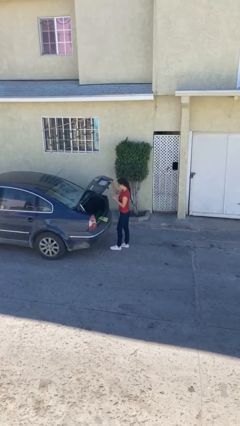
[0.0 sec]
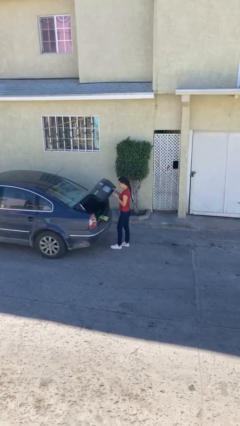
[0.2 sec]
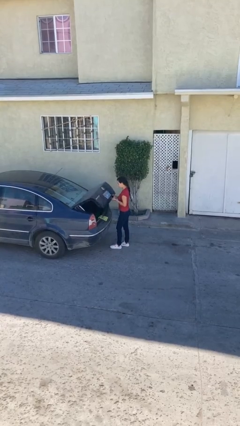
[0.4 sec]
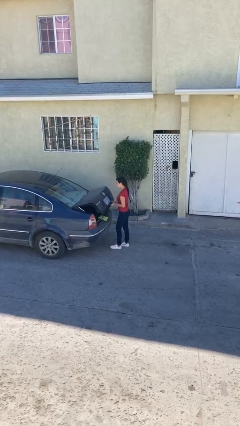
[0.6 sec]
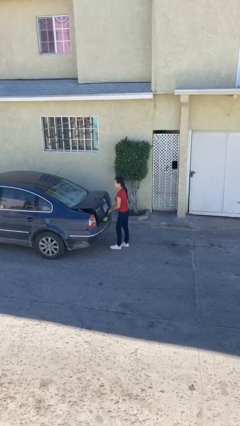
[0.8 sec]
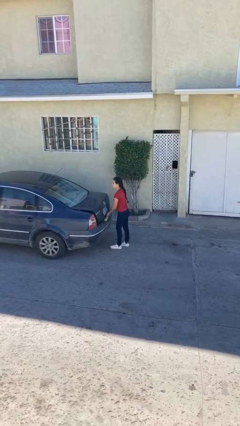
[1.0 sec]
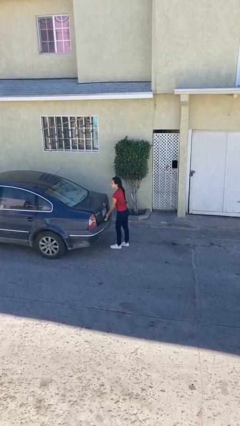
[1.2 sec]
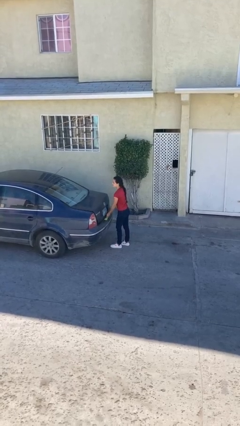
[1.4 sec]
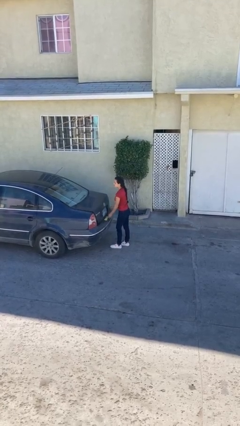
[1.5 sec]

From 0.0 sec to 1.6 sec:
person closes car trunk

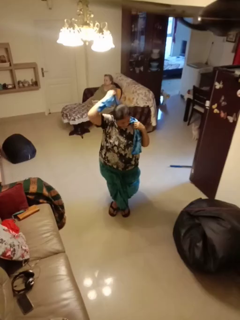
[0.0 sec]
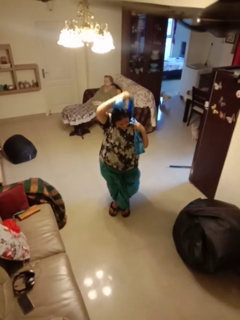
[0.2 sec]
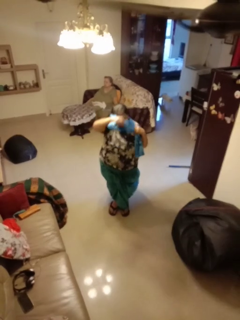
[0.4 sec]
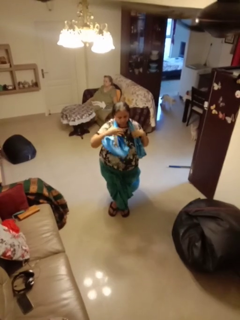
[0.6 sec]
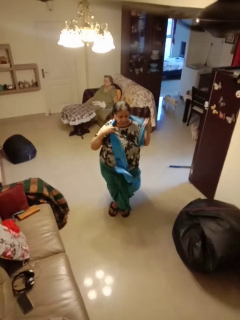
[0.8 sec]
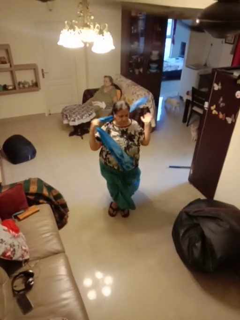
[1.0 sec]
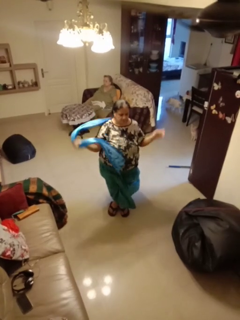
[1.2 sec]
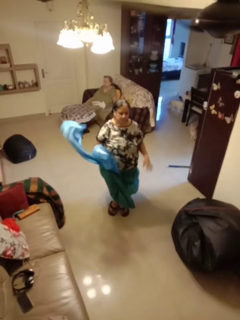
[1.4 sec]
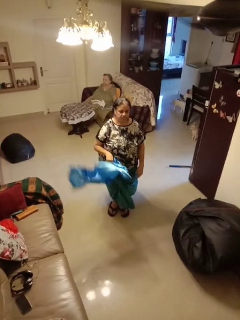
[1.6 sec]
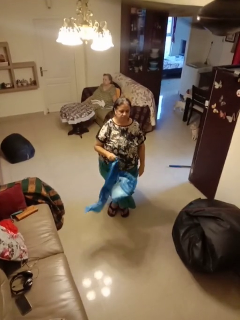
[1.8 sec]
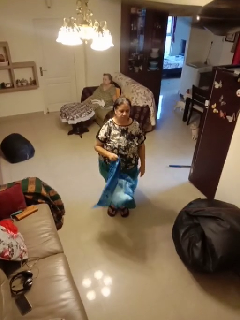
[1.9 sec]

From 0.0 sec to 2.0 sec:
person takes off scarf

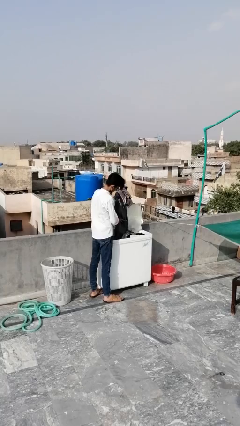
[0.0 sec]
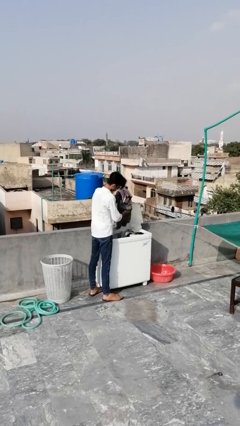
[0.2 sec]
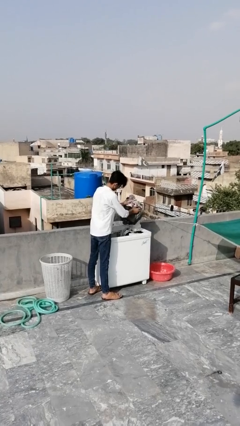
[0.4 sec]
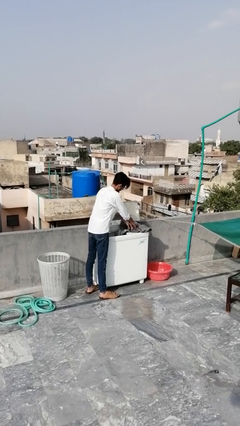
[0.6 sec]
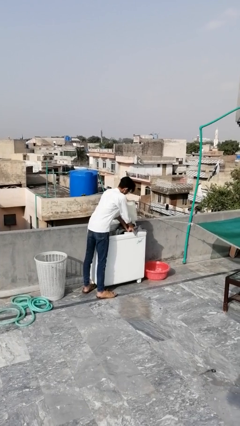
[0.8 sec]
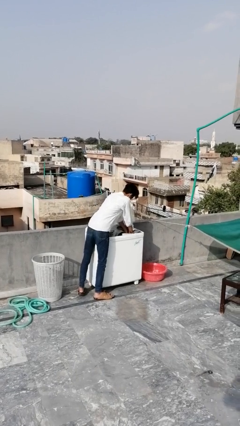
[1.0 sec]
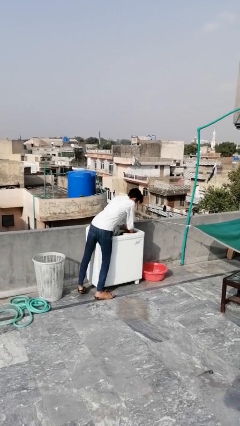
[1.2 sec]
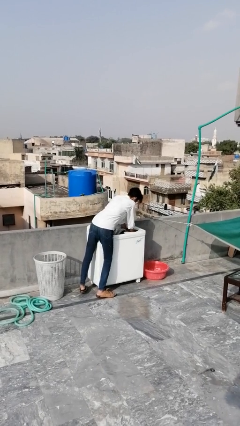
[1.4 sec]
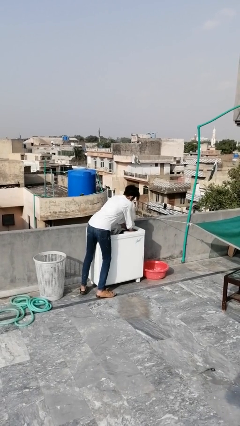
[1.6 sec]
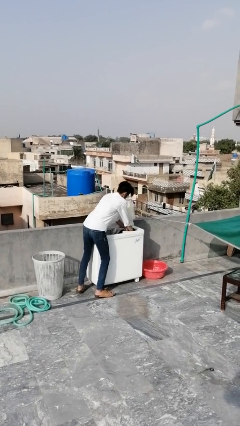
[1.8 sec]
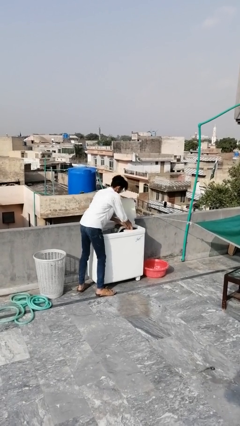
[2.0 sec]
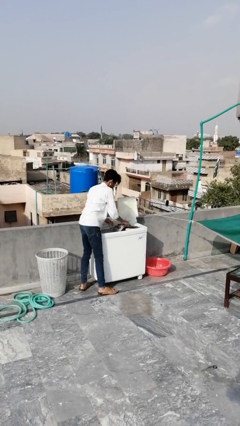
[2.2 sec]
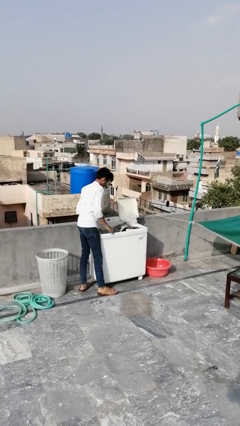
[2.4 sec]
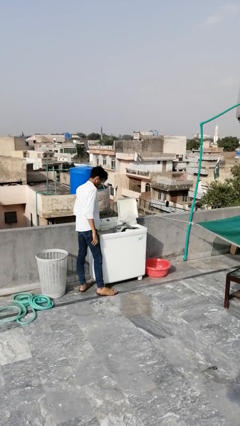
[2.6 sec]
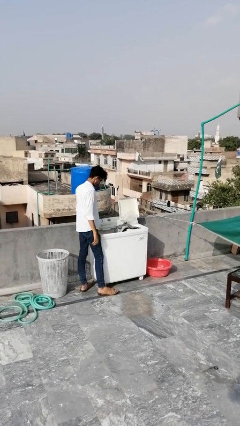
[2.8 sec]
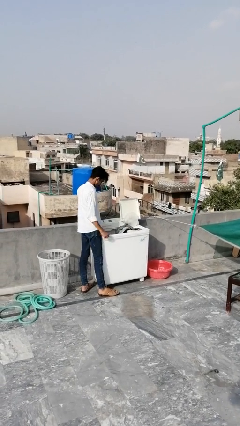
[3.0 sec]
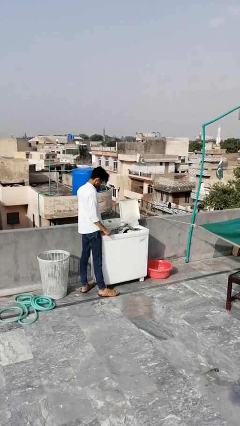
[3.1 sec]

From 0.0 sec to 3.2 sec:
person loads dryer

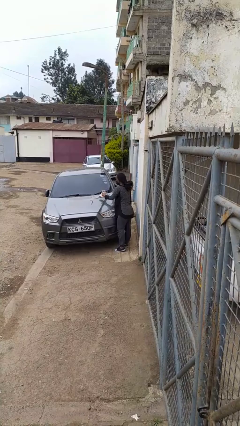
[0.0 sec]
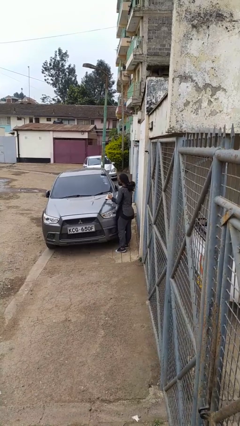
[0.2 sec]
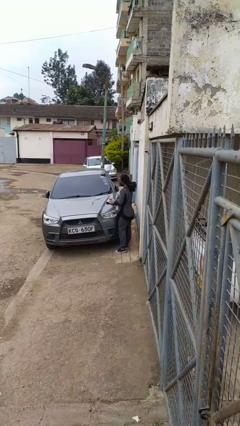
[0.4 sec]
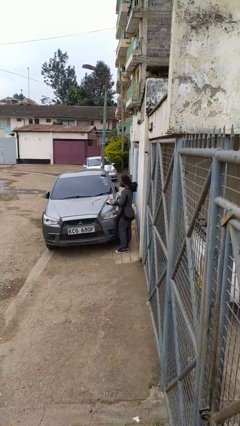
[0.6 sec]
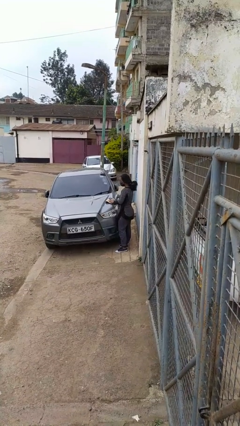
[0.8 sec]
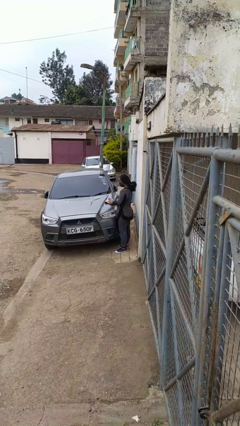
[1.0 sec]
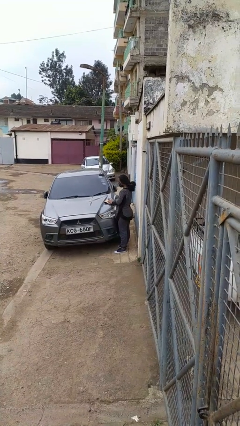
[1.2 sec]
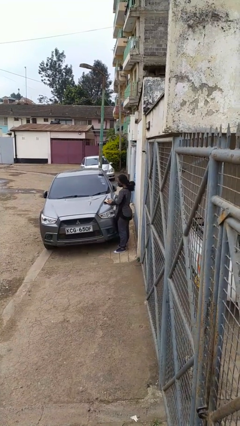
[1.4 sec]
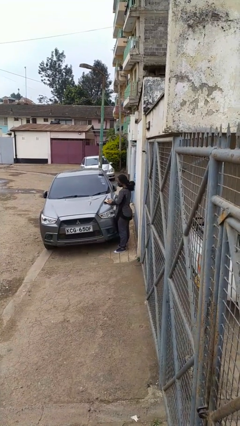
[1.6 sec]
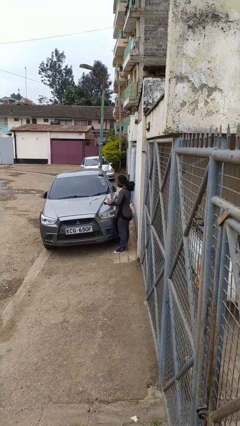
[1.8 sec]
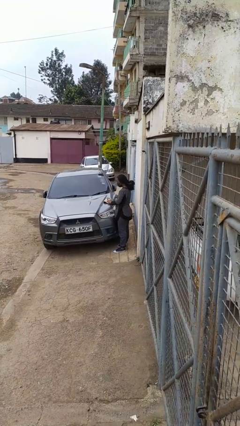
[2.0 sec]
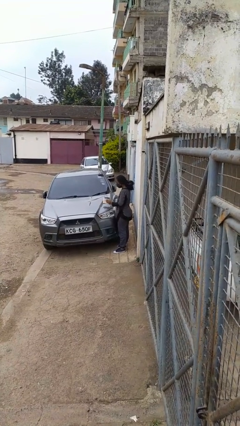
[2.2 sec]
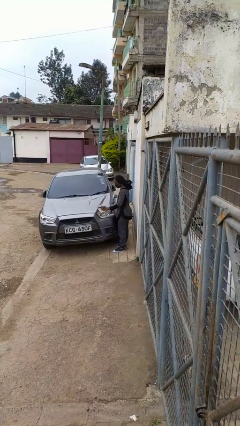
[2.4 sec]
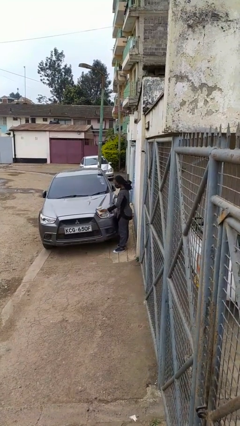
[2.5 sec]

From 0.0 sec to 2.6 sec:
person polishes car with rag

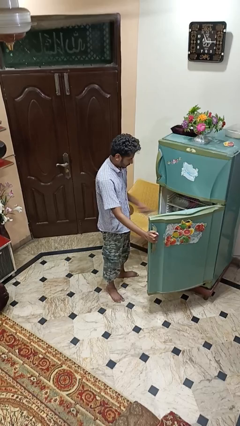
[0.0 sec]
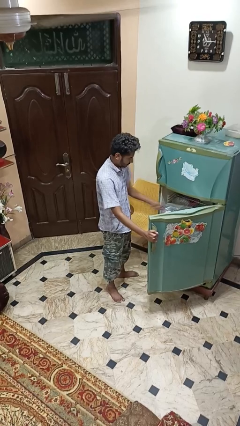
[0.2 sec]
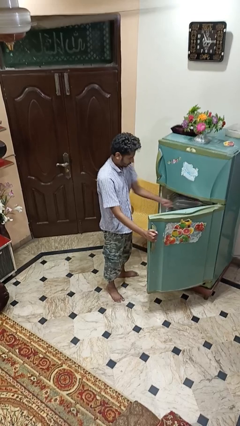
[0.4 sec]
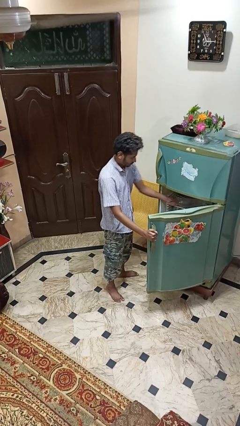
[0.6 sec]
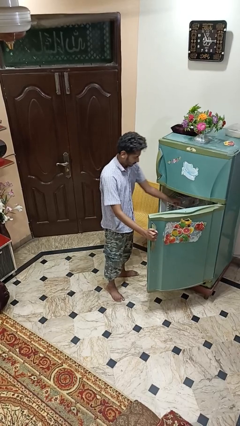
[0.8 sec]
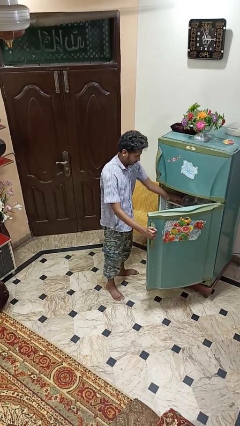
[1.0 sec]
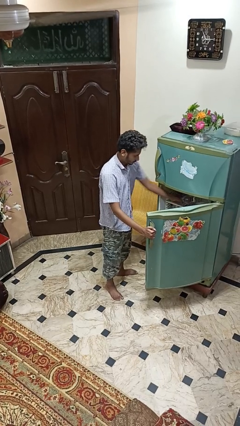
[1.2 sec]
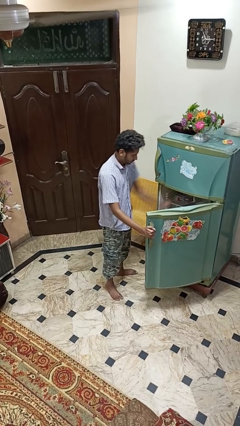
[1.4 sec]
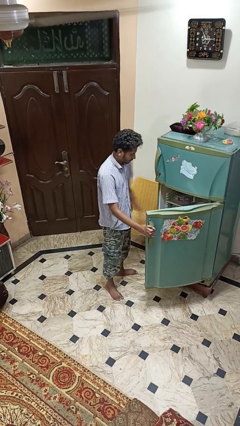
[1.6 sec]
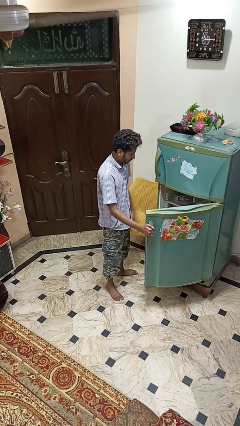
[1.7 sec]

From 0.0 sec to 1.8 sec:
person puts object into refrigerator

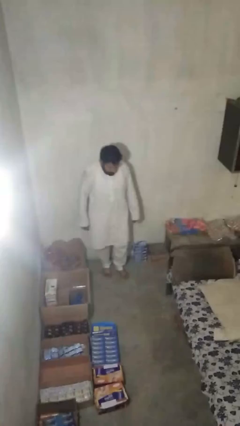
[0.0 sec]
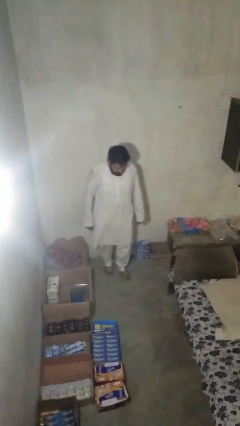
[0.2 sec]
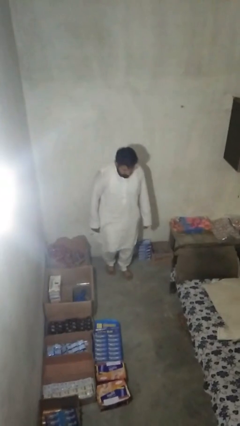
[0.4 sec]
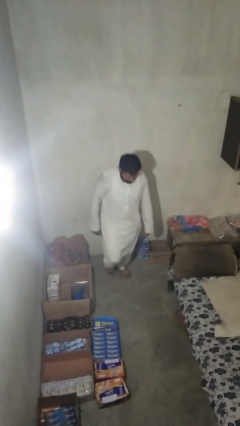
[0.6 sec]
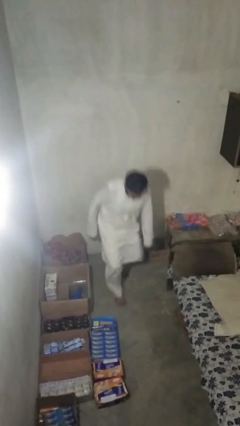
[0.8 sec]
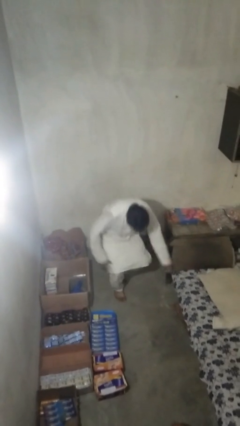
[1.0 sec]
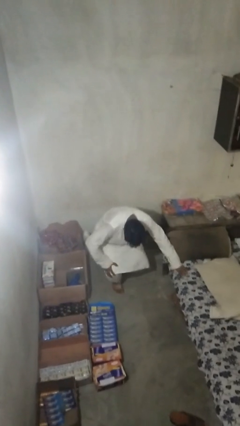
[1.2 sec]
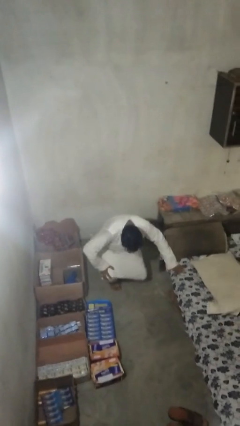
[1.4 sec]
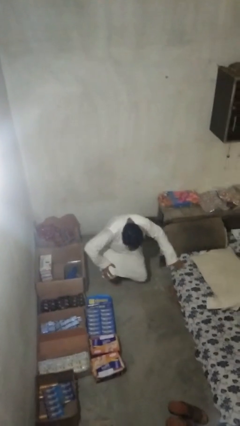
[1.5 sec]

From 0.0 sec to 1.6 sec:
person trips on object on floor

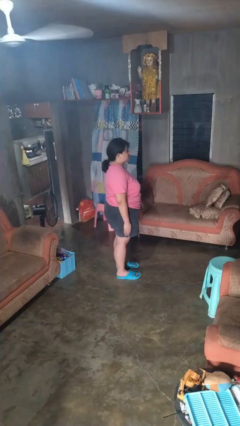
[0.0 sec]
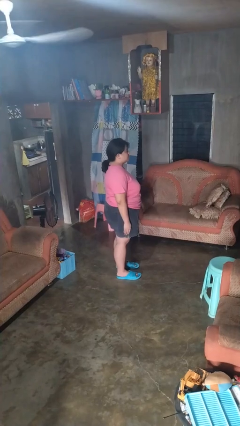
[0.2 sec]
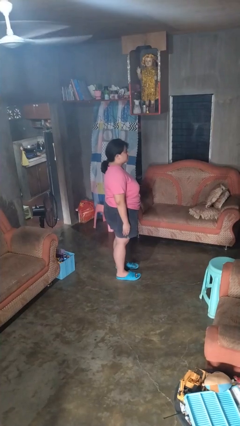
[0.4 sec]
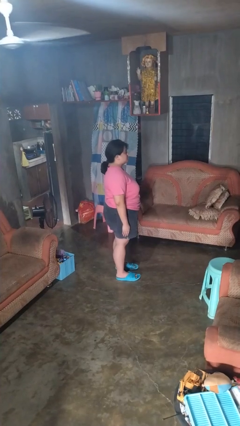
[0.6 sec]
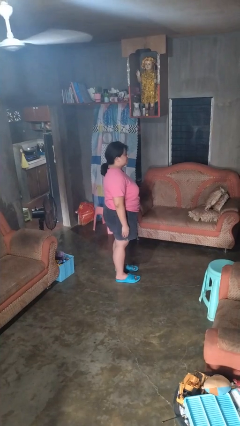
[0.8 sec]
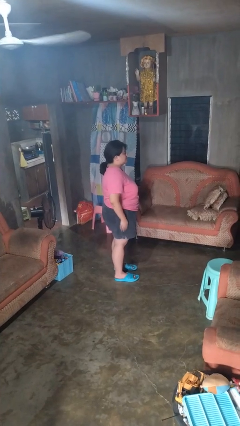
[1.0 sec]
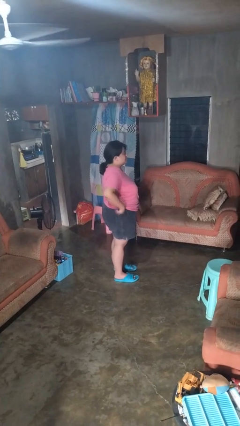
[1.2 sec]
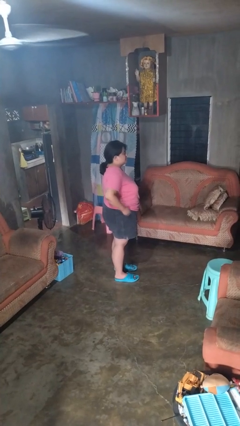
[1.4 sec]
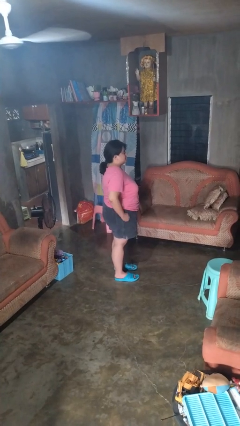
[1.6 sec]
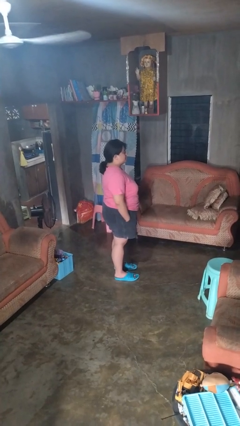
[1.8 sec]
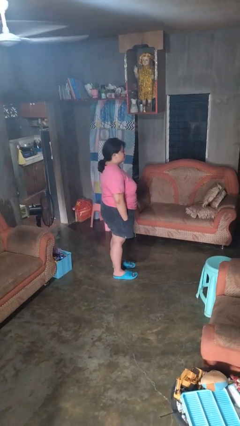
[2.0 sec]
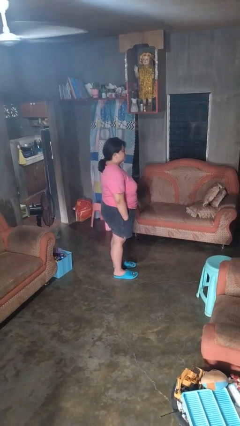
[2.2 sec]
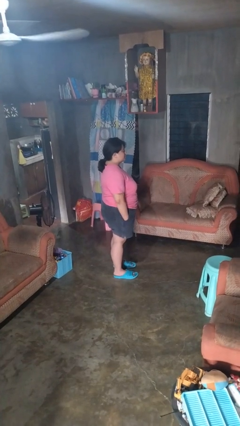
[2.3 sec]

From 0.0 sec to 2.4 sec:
person puts hands in back pockets

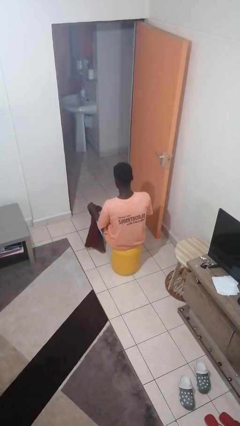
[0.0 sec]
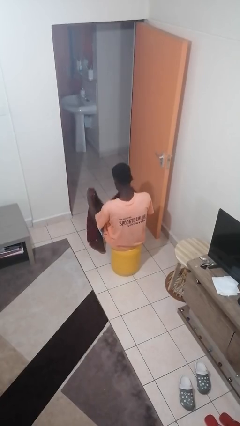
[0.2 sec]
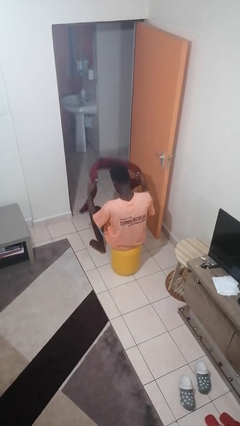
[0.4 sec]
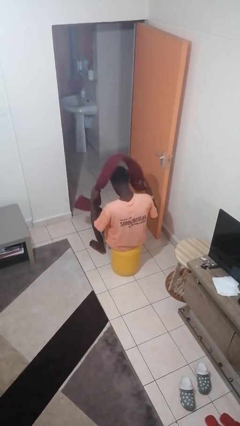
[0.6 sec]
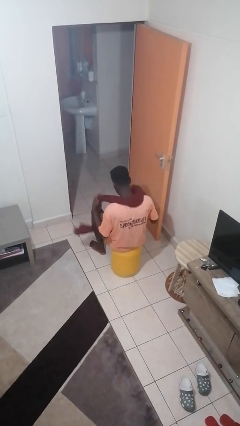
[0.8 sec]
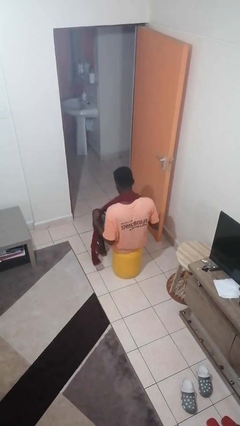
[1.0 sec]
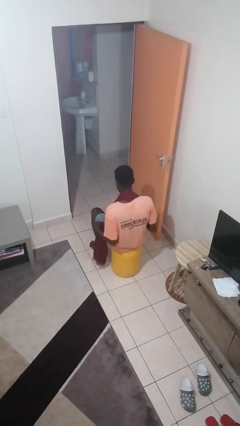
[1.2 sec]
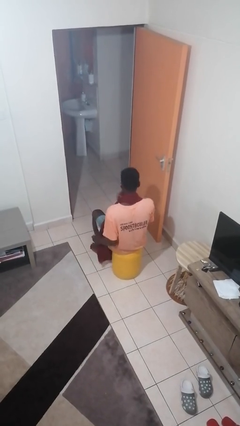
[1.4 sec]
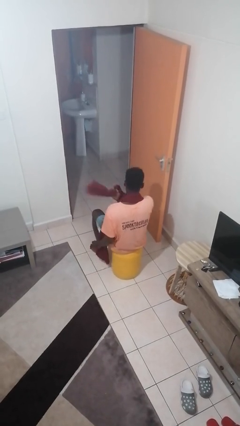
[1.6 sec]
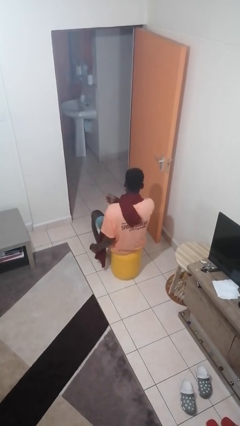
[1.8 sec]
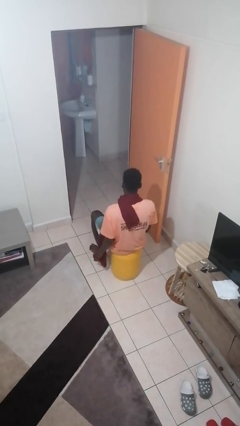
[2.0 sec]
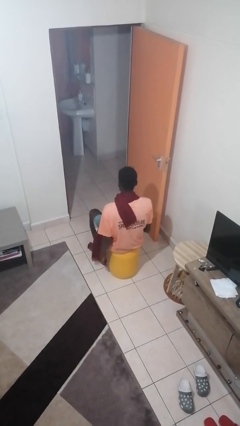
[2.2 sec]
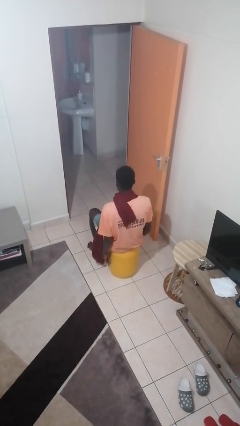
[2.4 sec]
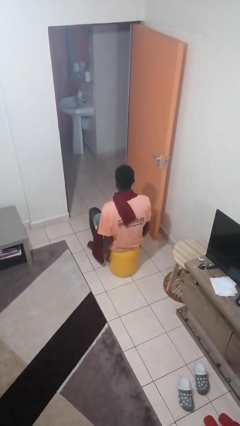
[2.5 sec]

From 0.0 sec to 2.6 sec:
person puts on scarf
